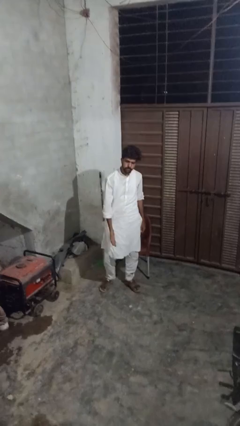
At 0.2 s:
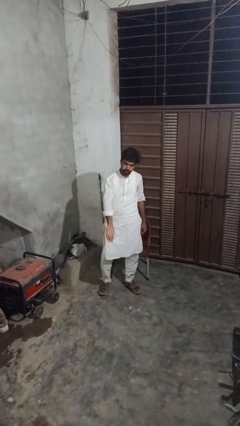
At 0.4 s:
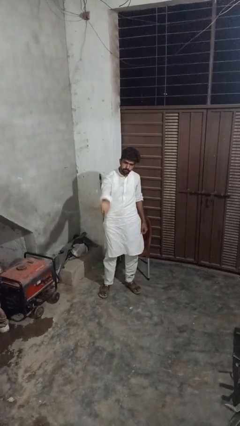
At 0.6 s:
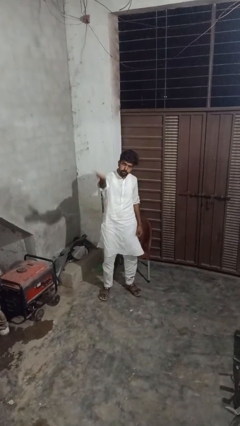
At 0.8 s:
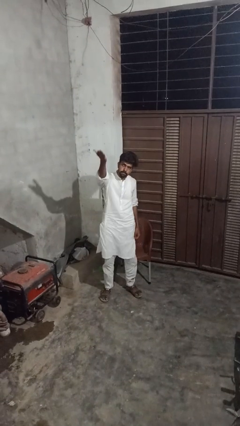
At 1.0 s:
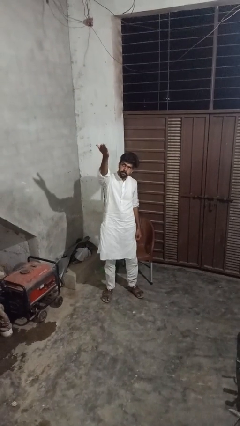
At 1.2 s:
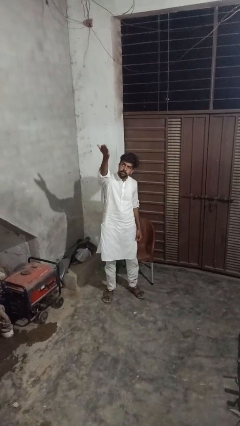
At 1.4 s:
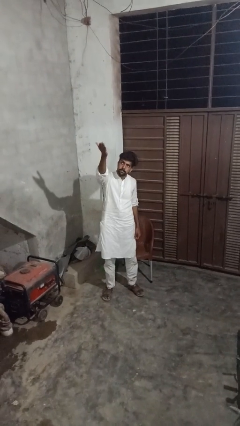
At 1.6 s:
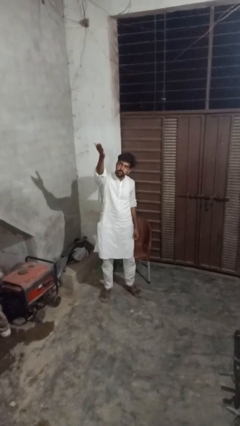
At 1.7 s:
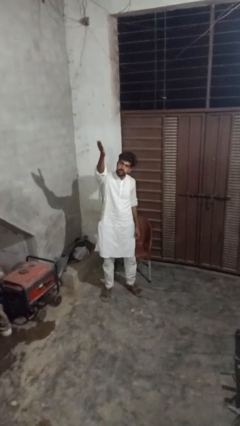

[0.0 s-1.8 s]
person gestures swipe up

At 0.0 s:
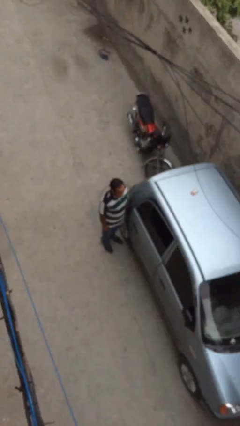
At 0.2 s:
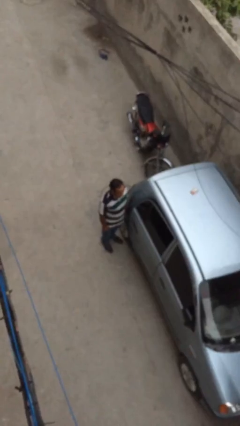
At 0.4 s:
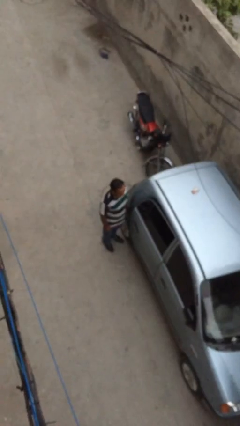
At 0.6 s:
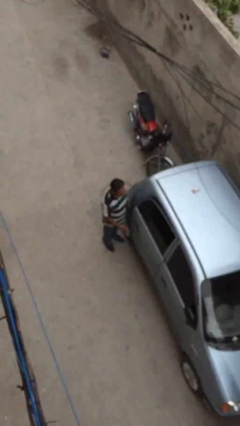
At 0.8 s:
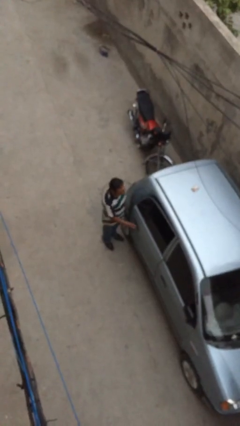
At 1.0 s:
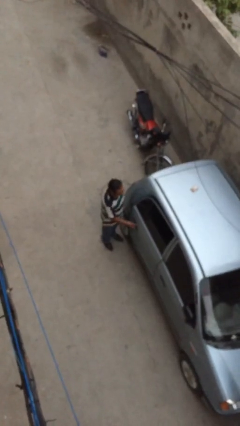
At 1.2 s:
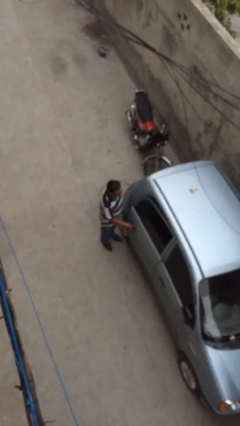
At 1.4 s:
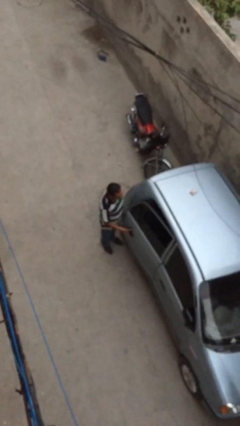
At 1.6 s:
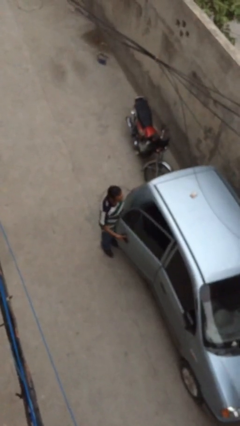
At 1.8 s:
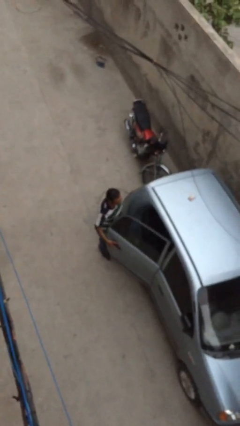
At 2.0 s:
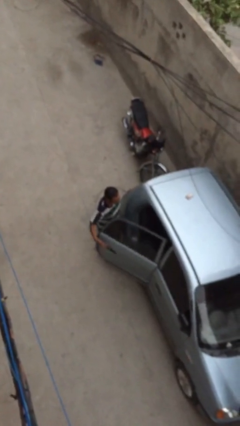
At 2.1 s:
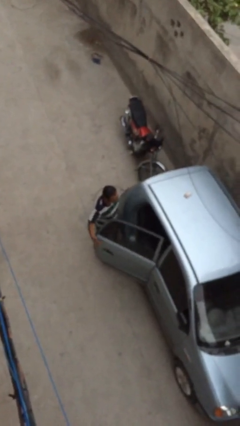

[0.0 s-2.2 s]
person opens car door

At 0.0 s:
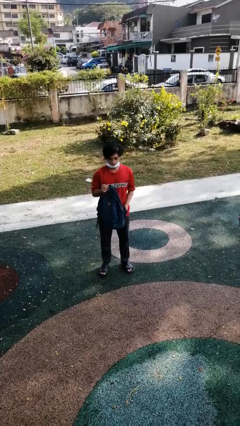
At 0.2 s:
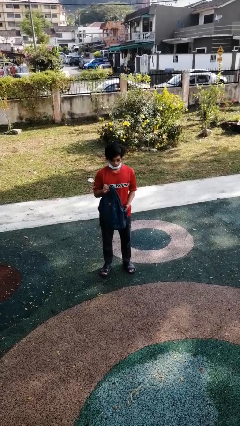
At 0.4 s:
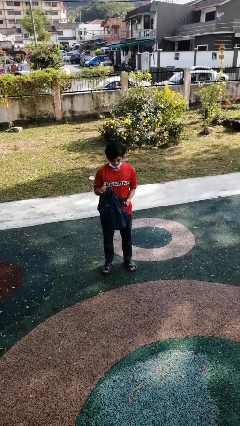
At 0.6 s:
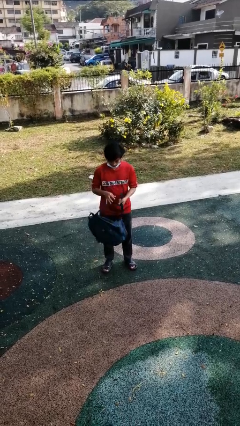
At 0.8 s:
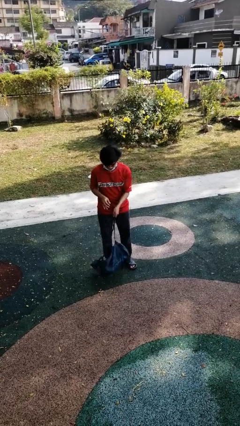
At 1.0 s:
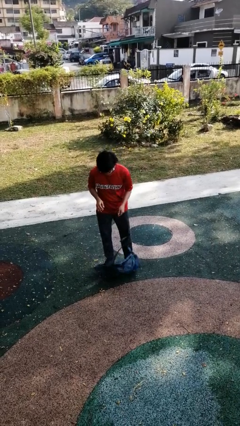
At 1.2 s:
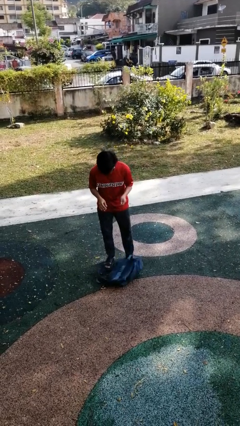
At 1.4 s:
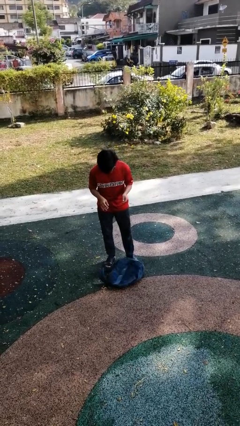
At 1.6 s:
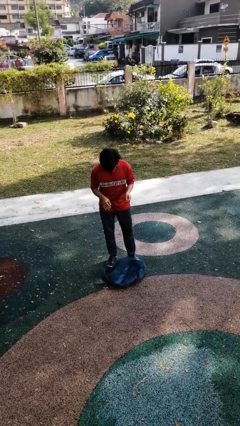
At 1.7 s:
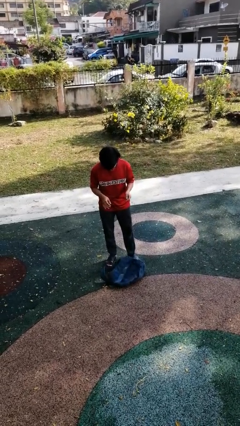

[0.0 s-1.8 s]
person drops object

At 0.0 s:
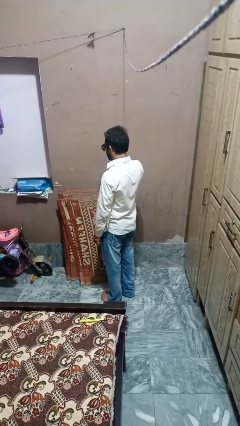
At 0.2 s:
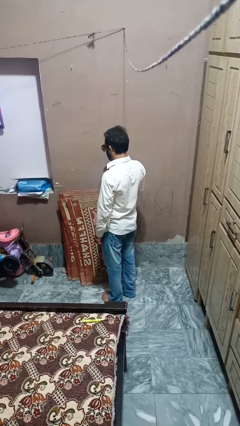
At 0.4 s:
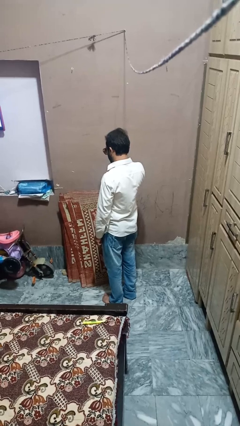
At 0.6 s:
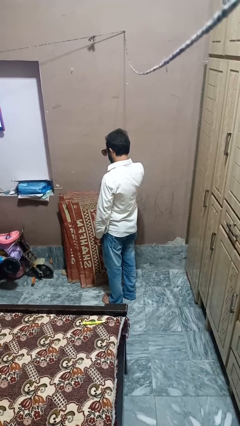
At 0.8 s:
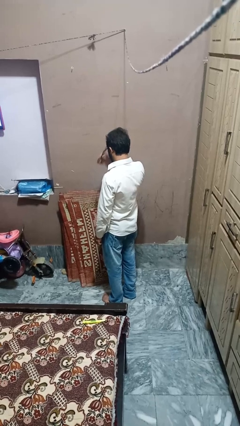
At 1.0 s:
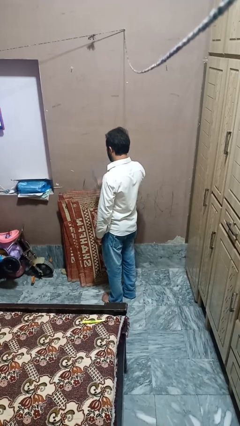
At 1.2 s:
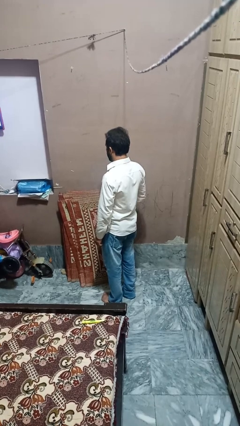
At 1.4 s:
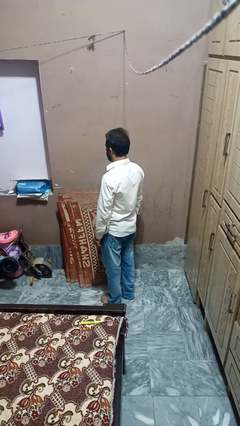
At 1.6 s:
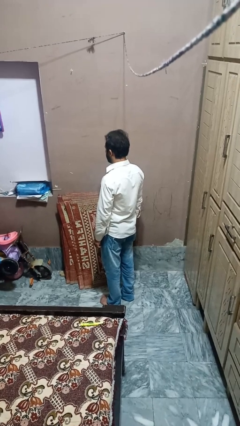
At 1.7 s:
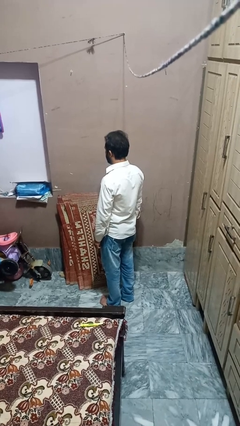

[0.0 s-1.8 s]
person takes off sunglasses

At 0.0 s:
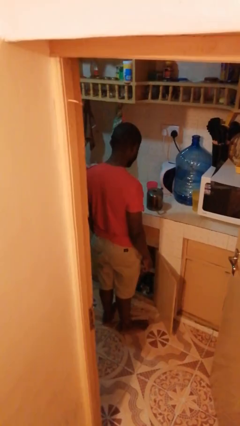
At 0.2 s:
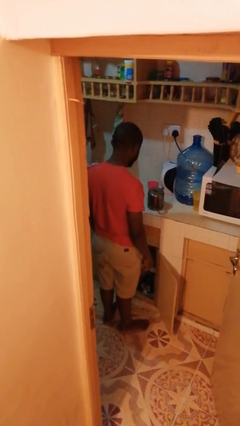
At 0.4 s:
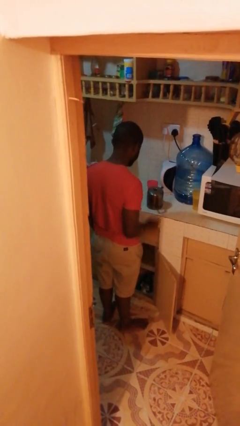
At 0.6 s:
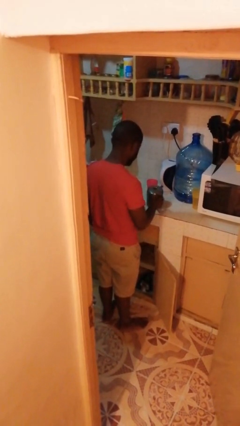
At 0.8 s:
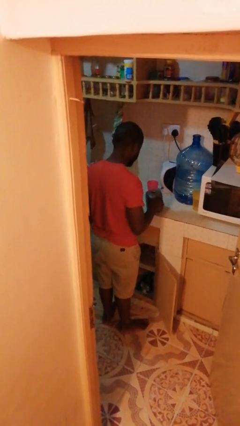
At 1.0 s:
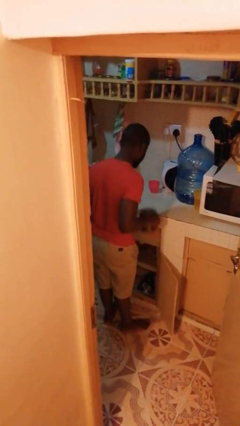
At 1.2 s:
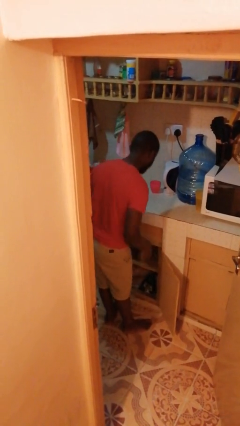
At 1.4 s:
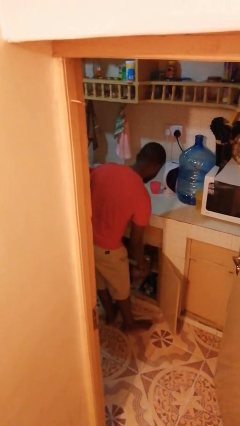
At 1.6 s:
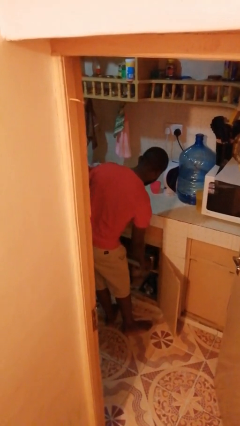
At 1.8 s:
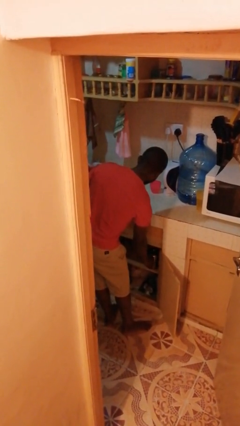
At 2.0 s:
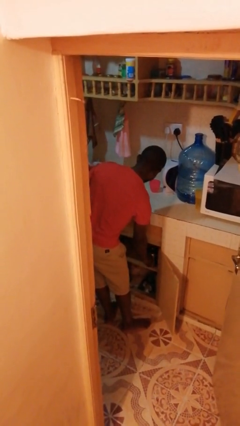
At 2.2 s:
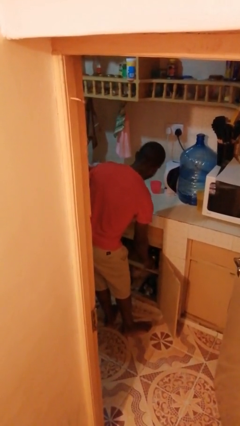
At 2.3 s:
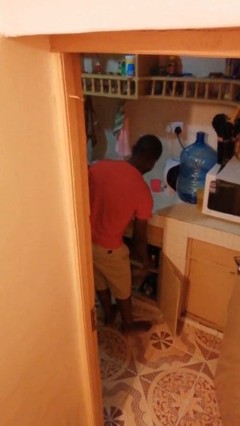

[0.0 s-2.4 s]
person puts object in cabinet

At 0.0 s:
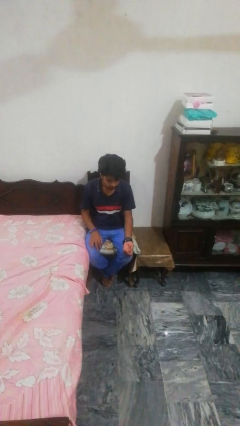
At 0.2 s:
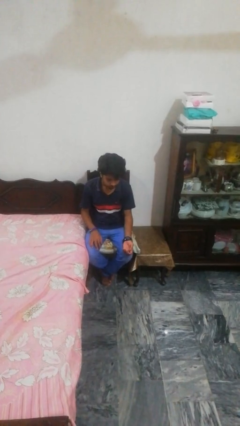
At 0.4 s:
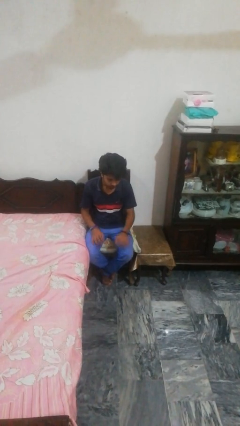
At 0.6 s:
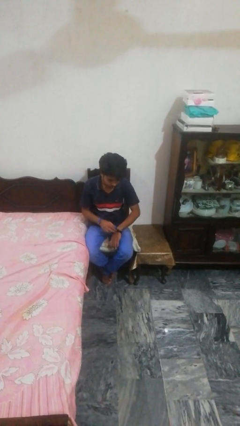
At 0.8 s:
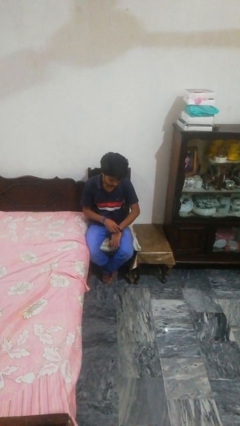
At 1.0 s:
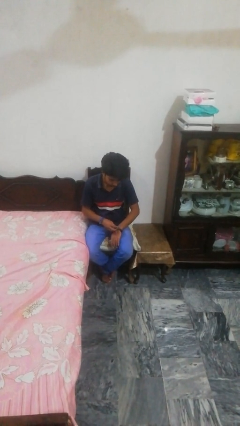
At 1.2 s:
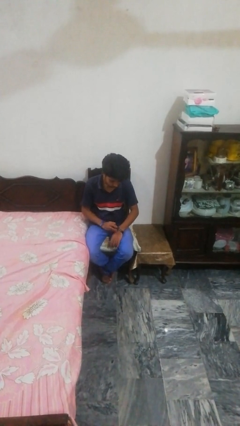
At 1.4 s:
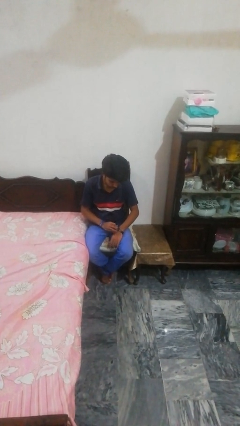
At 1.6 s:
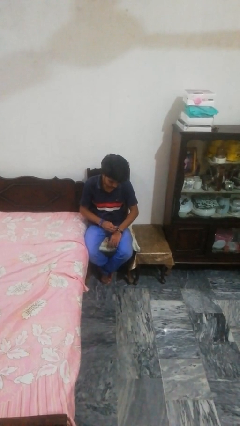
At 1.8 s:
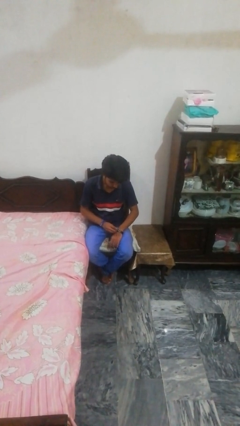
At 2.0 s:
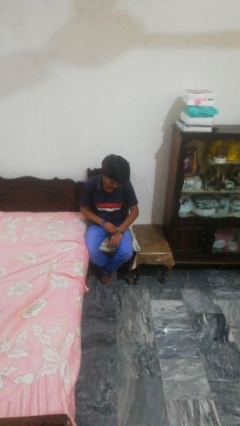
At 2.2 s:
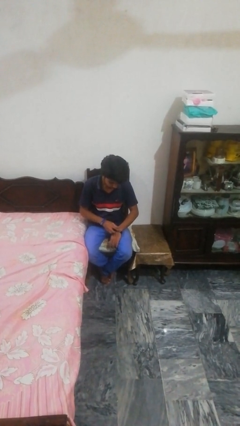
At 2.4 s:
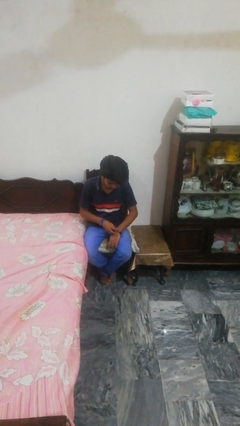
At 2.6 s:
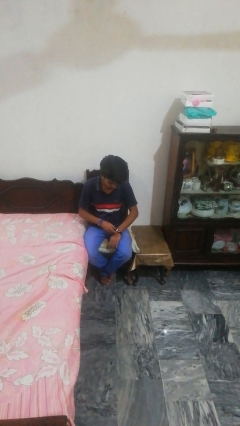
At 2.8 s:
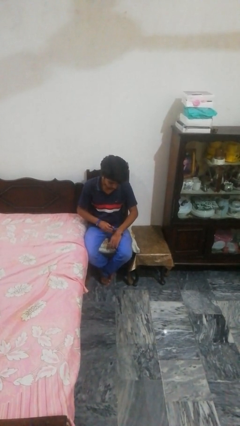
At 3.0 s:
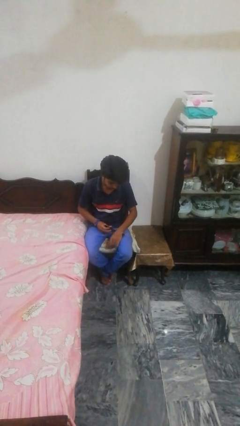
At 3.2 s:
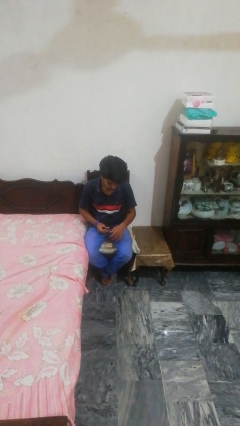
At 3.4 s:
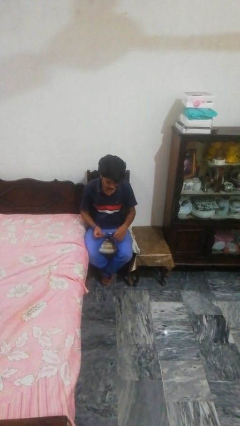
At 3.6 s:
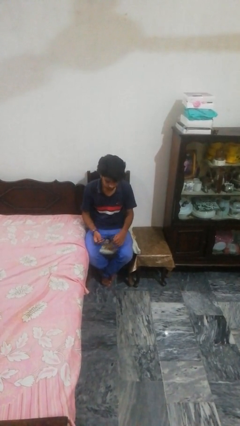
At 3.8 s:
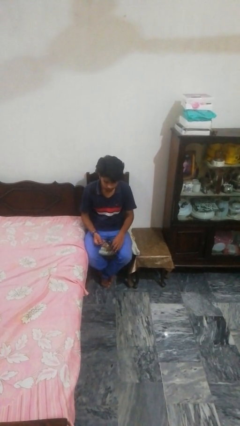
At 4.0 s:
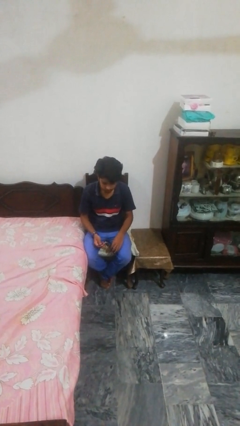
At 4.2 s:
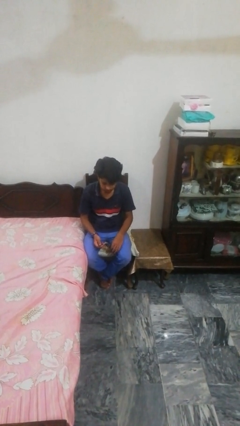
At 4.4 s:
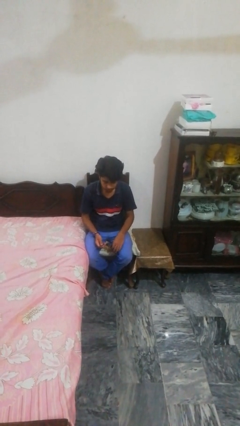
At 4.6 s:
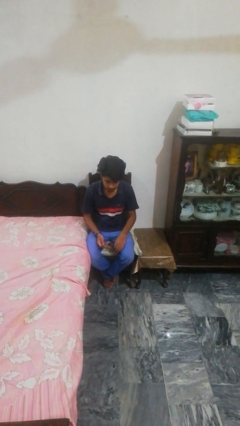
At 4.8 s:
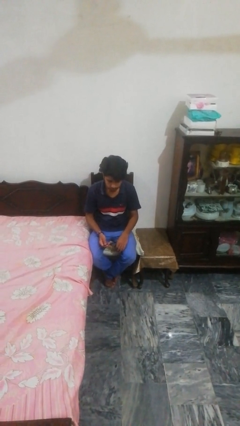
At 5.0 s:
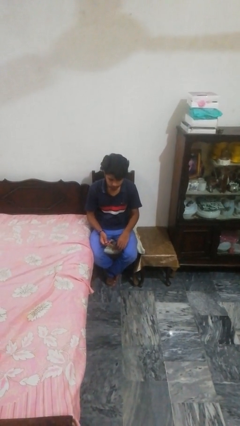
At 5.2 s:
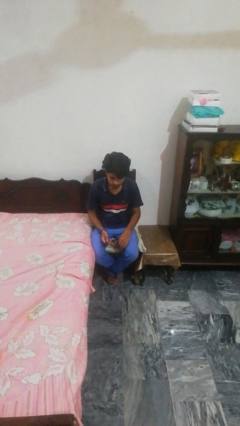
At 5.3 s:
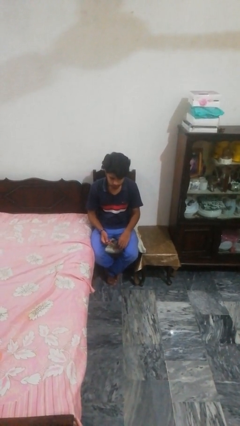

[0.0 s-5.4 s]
person takes off wristwatch

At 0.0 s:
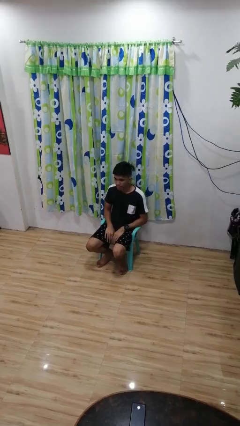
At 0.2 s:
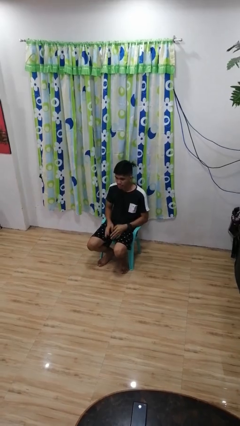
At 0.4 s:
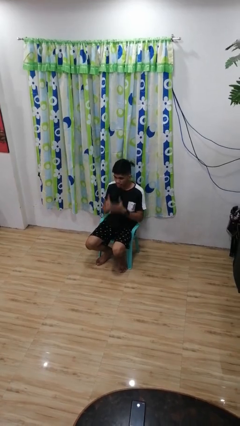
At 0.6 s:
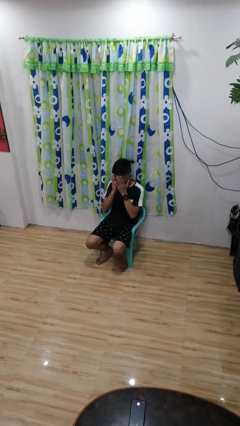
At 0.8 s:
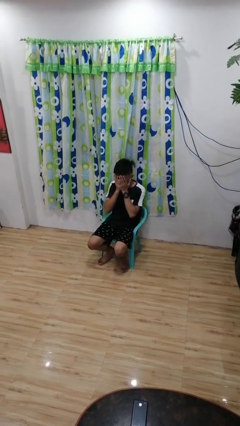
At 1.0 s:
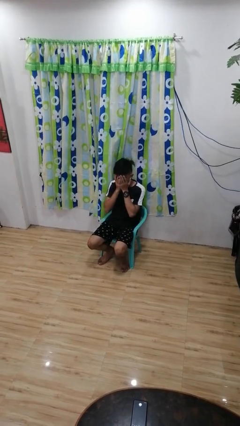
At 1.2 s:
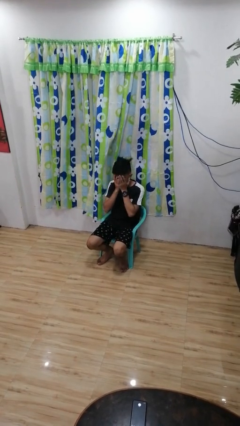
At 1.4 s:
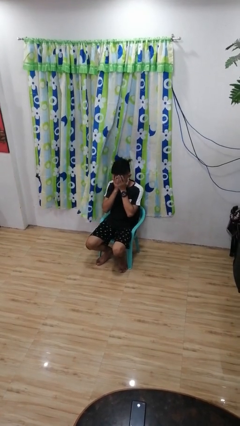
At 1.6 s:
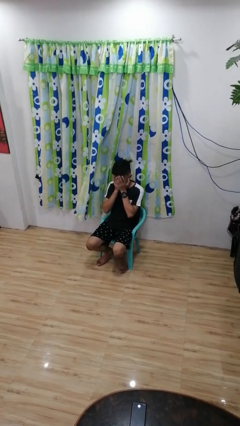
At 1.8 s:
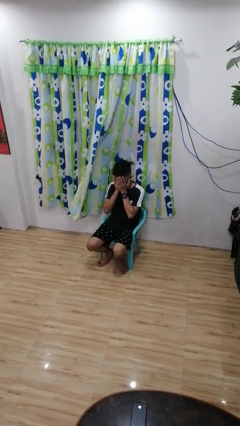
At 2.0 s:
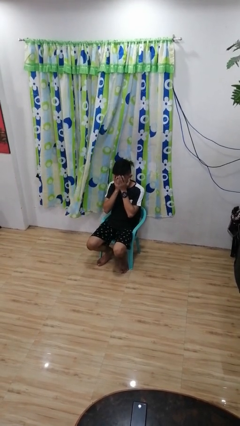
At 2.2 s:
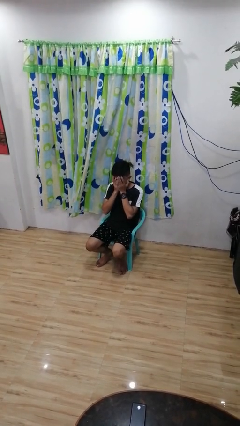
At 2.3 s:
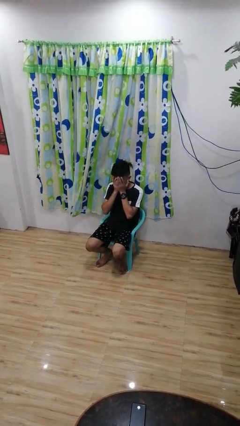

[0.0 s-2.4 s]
person covers face with hands
